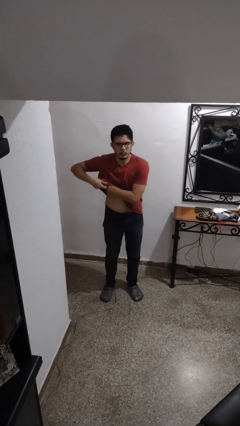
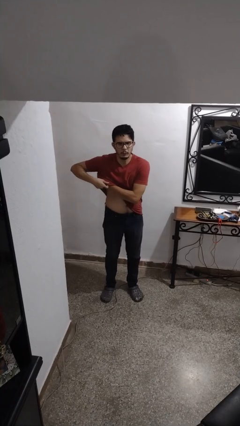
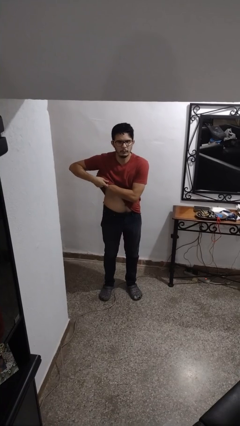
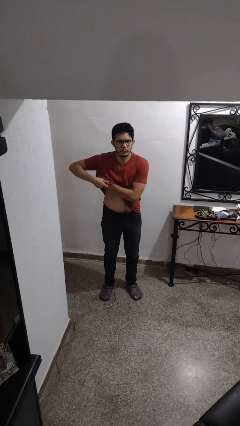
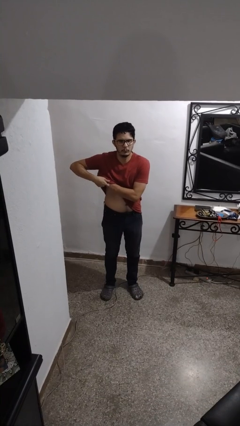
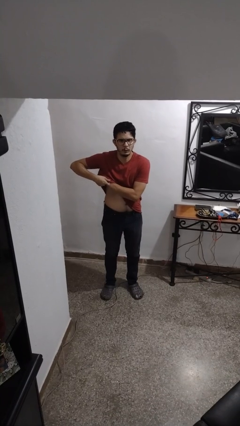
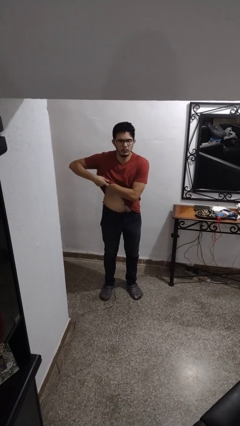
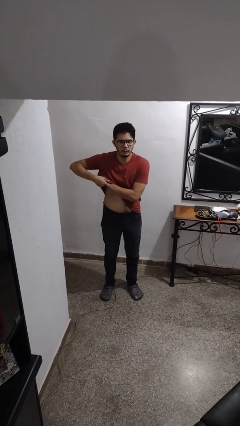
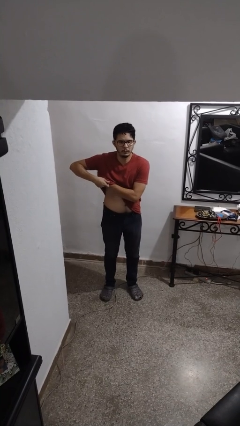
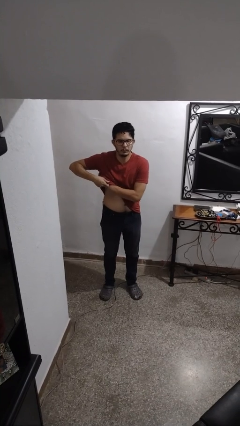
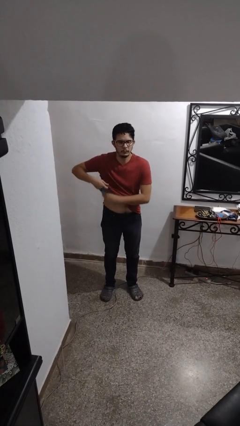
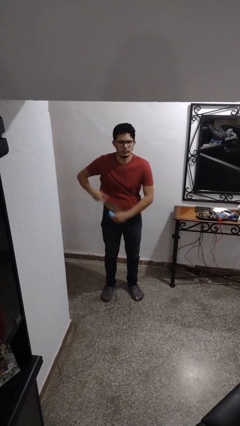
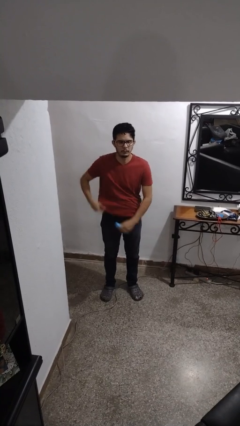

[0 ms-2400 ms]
person applies deodorant

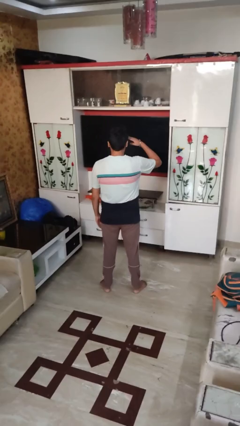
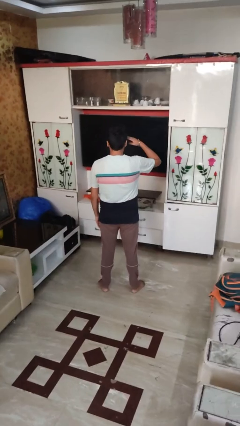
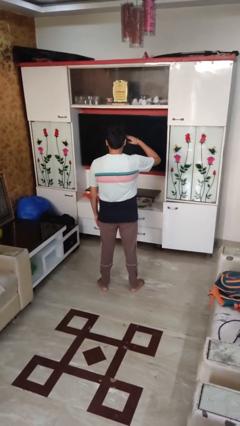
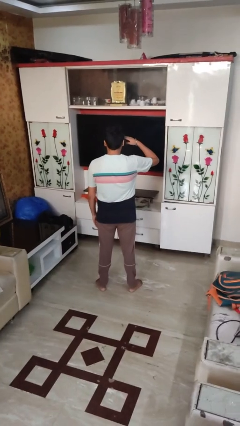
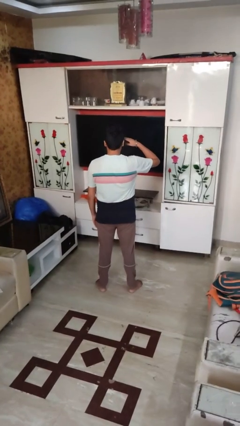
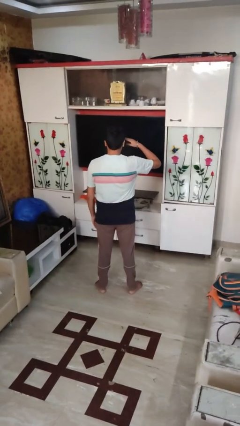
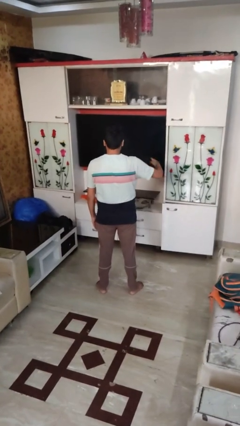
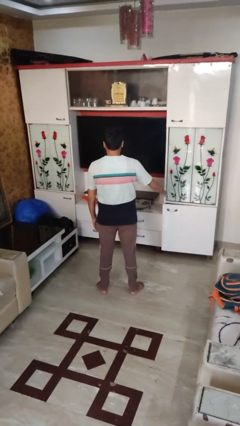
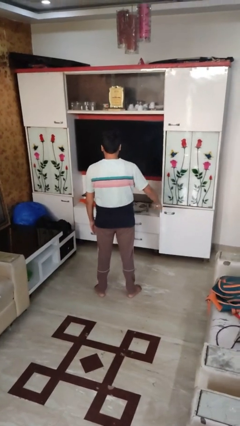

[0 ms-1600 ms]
person salutes

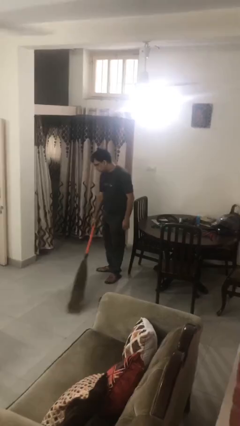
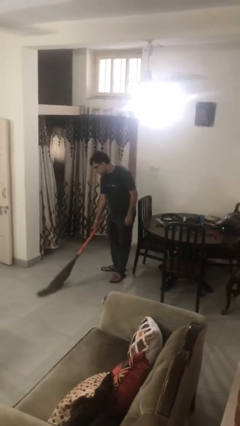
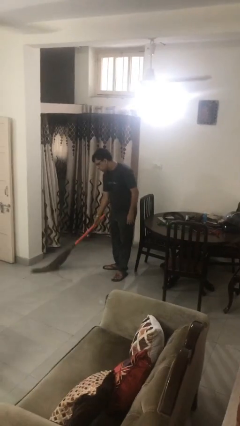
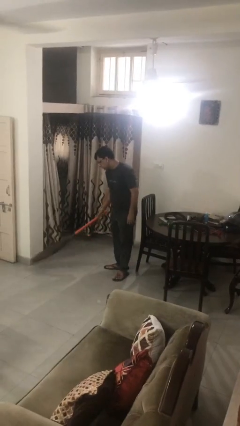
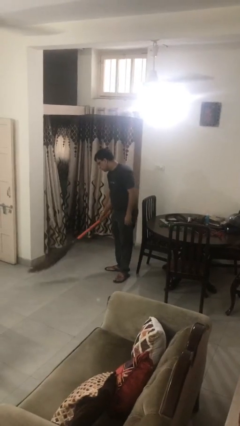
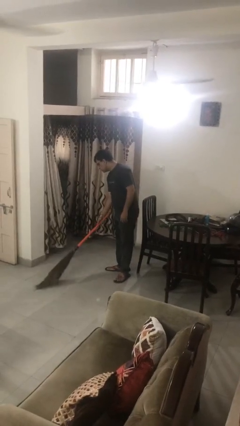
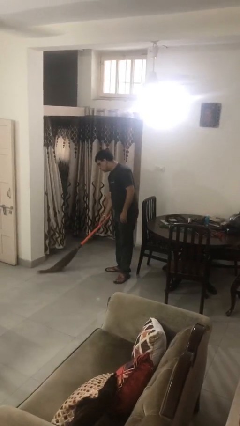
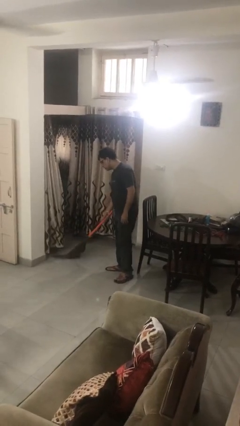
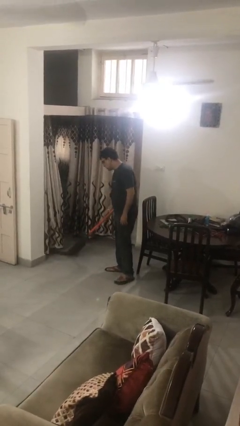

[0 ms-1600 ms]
person sweeps floor

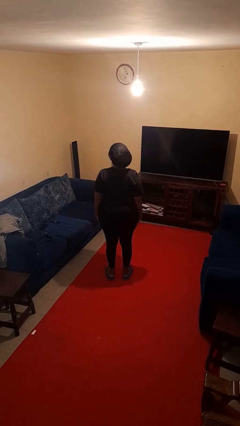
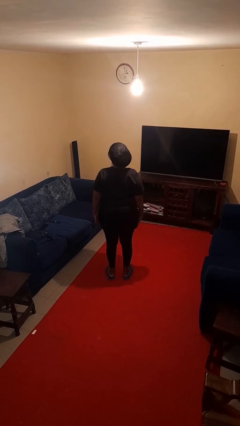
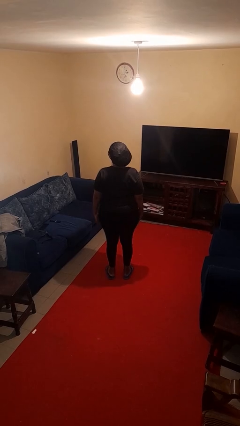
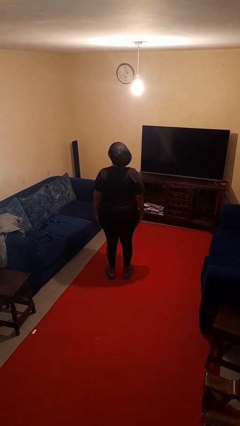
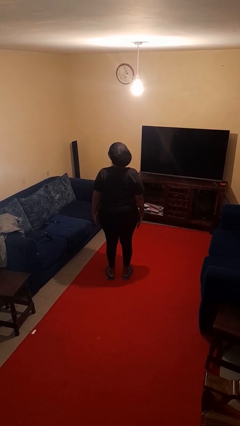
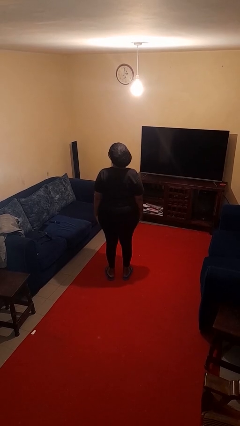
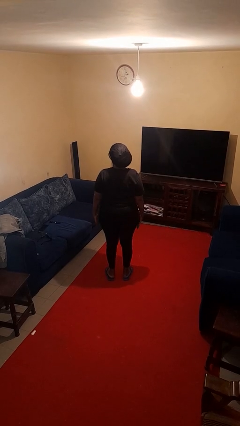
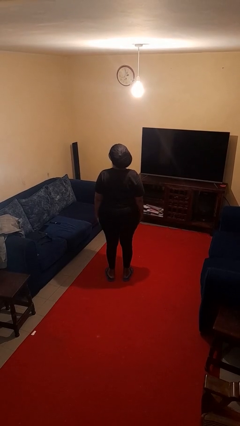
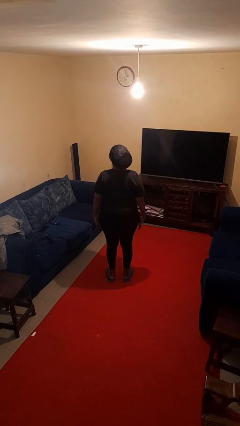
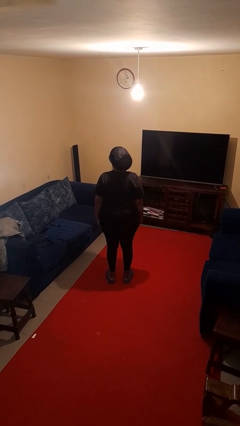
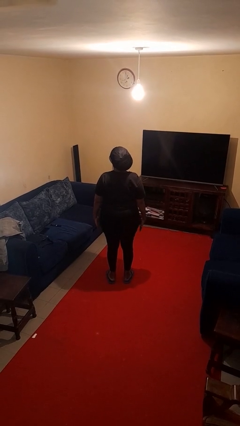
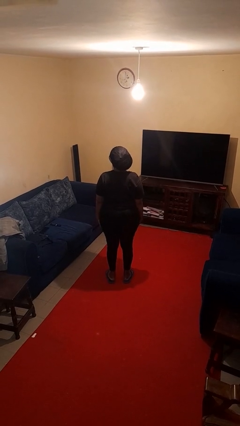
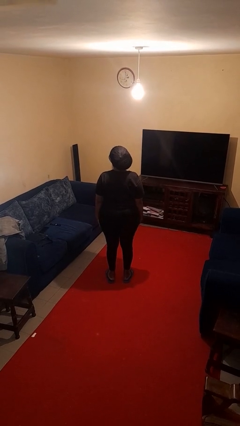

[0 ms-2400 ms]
person slaps hands on thighs

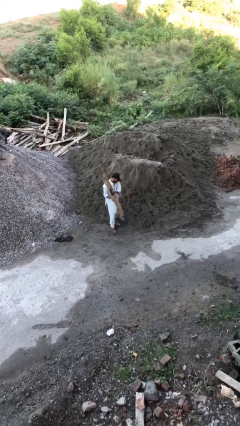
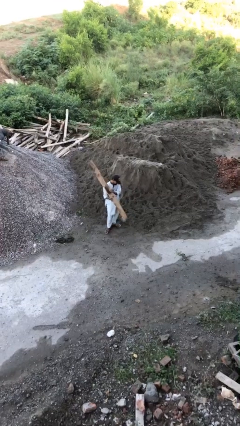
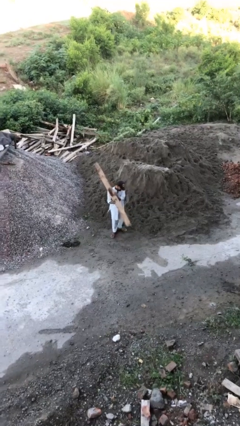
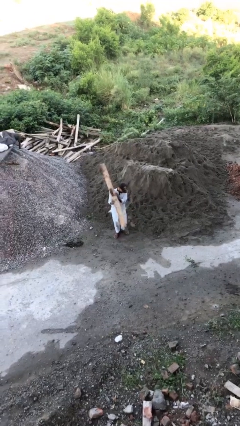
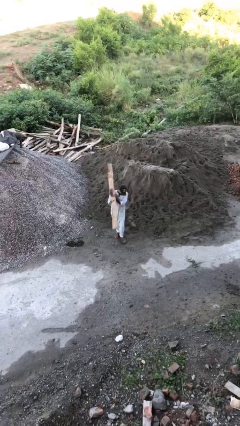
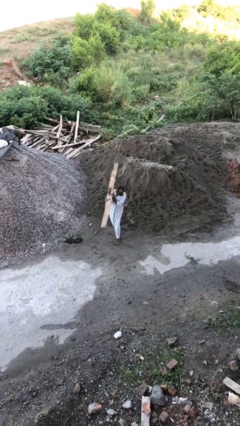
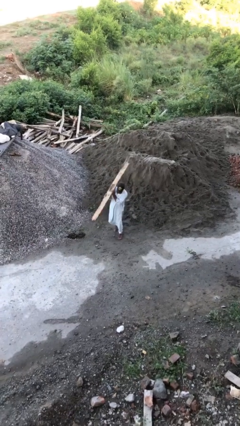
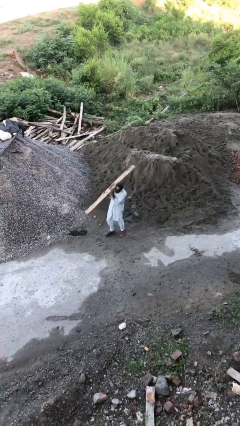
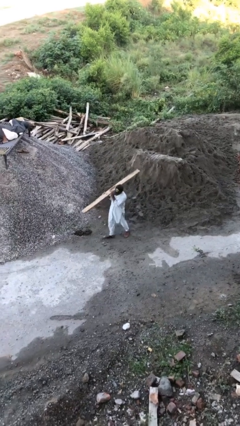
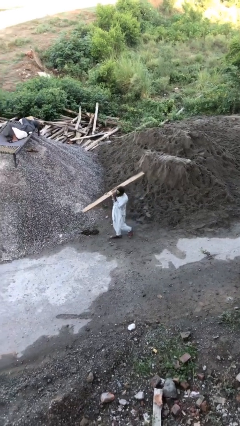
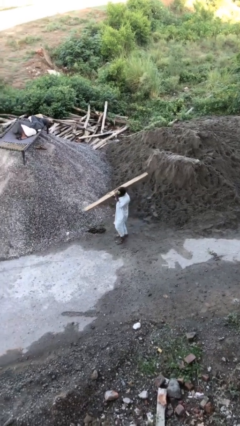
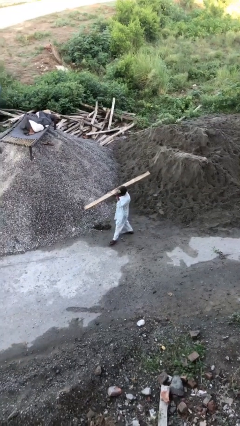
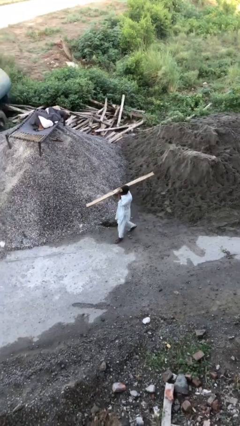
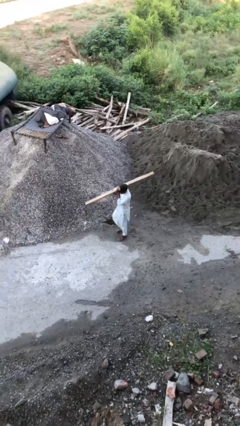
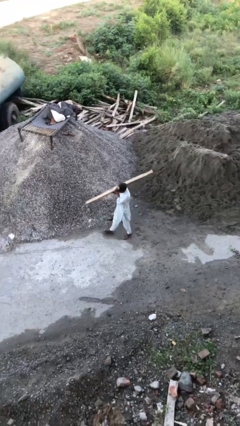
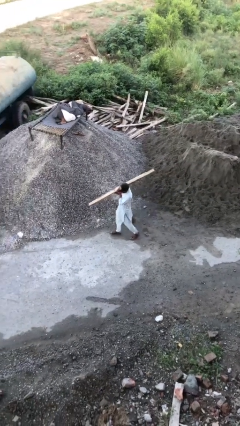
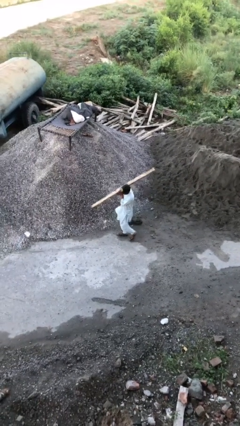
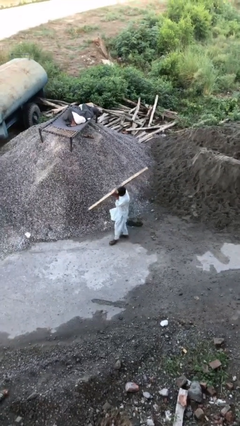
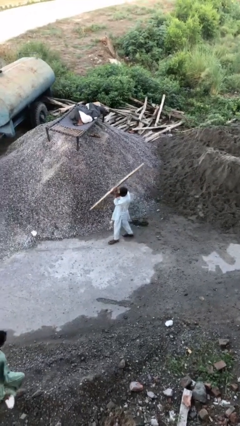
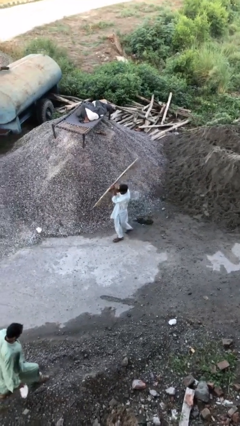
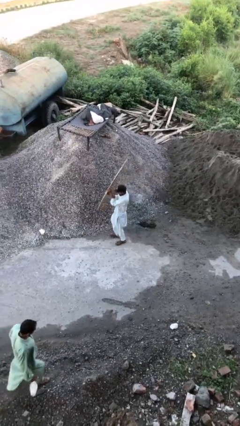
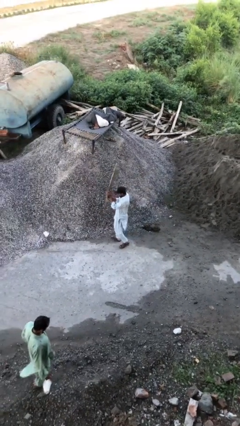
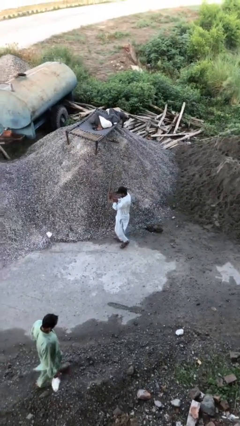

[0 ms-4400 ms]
person carries heavy object

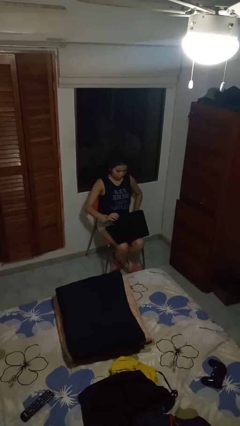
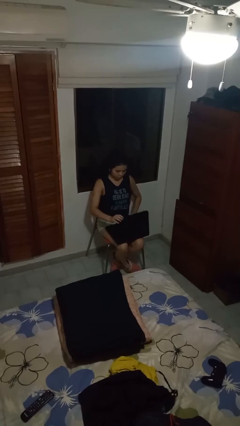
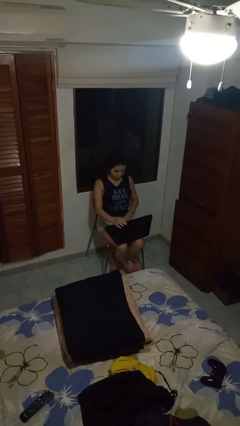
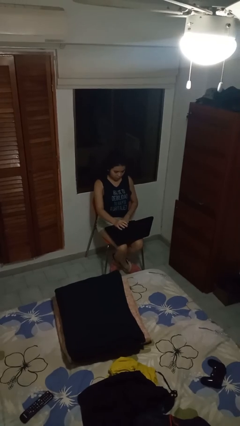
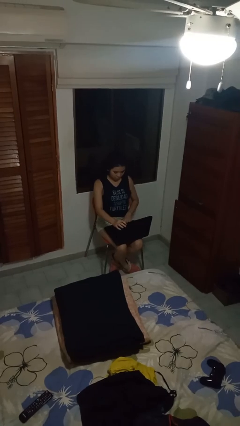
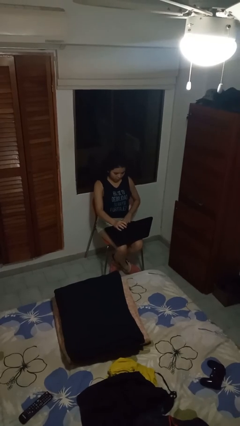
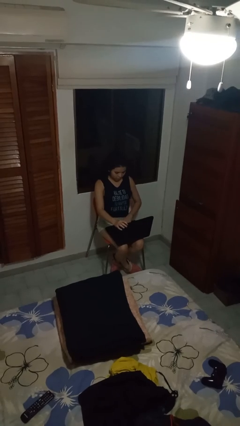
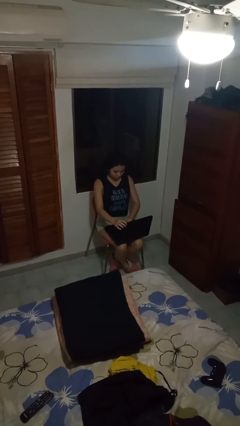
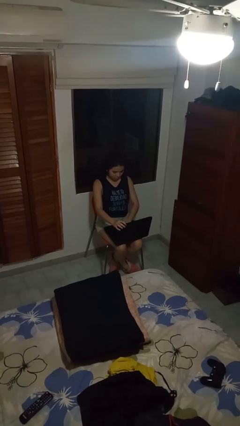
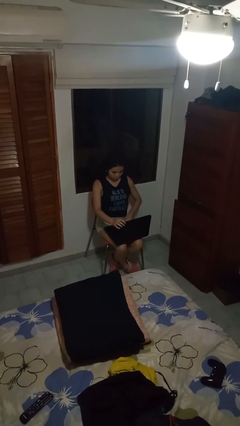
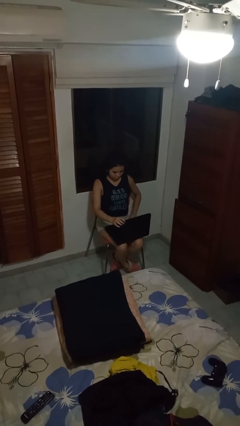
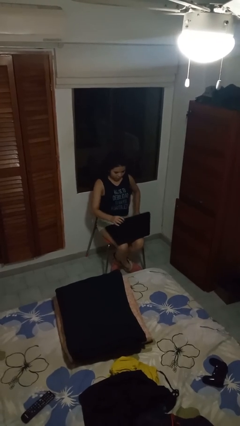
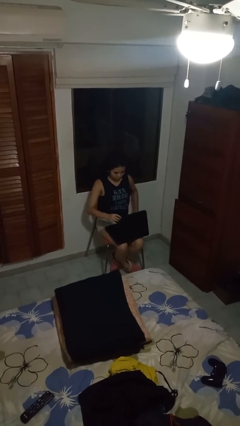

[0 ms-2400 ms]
person interacts with laptop

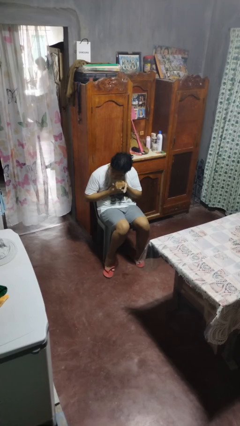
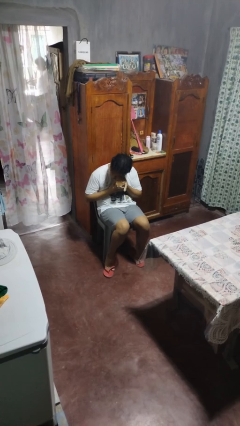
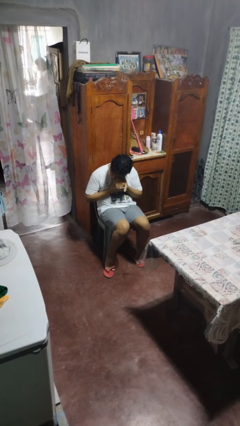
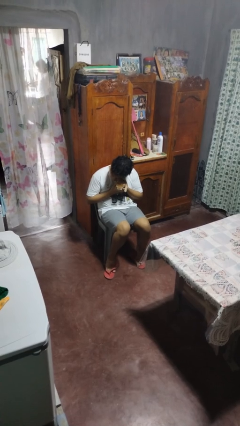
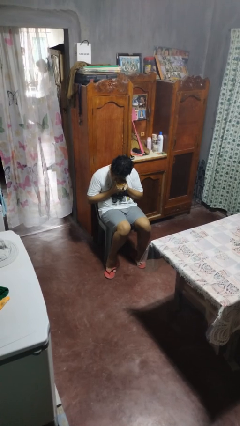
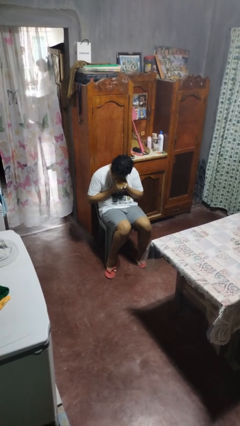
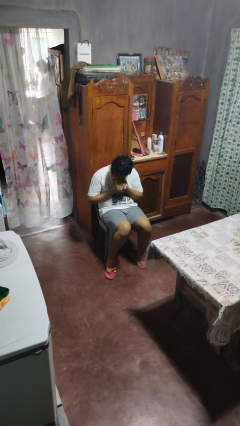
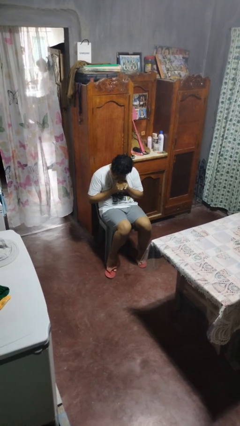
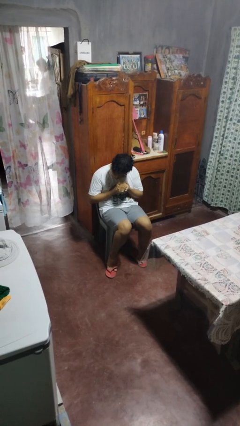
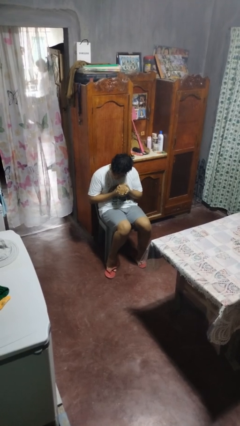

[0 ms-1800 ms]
person hugs cat

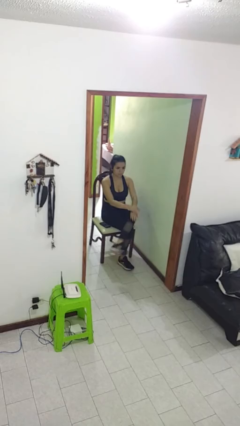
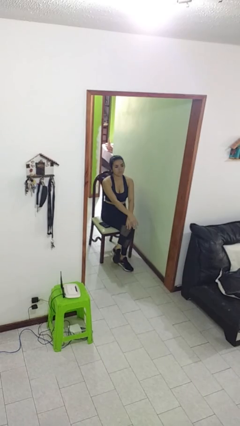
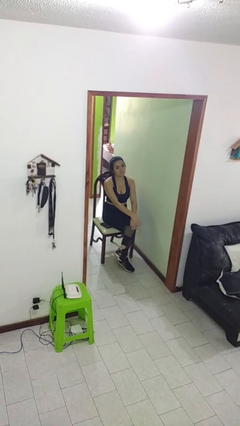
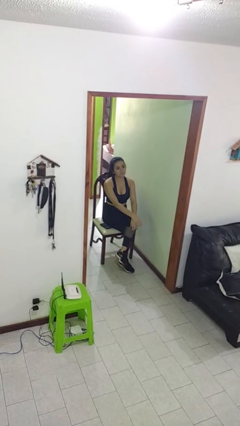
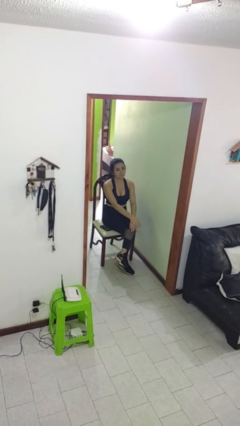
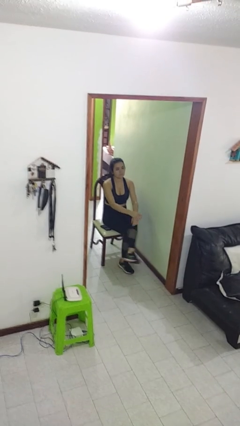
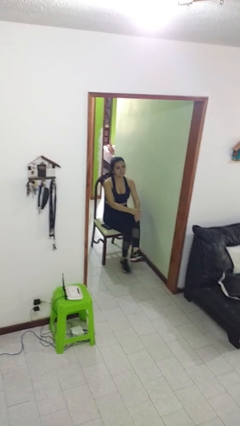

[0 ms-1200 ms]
person crosses legs
